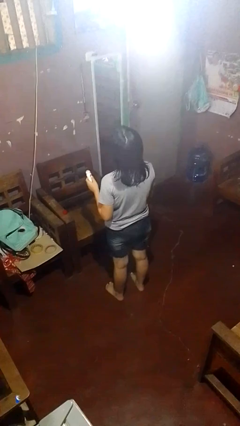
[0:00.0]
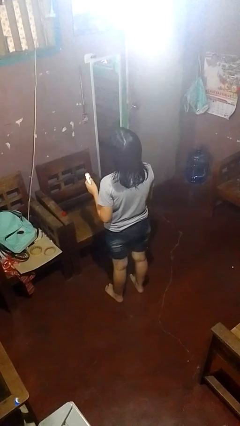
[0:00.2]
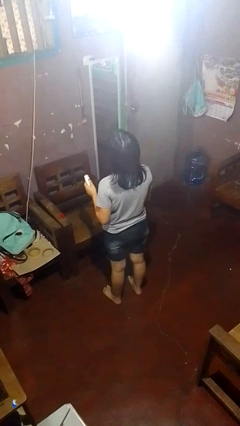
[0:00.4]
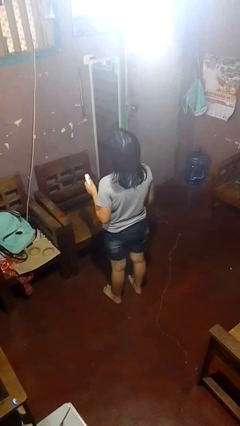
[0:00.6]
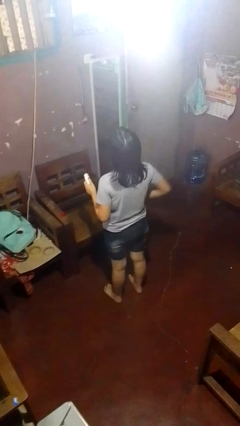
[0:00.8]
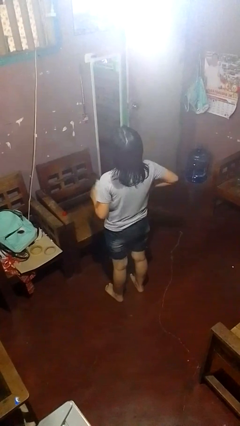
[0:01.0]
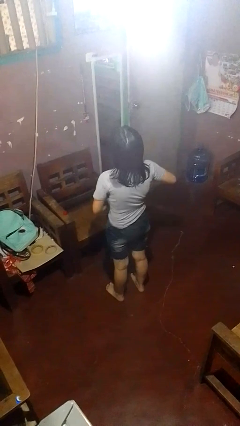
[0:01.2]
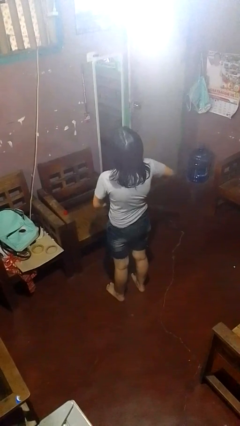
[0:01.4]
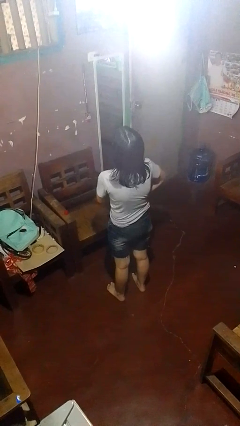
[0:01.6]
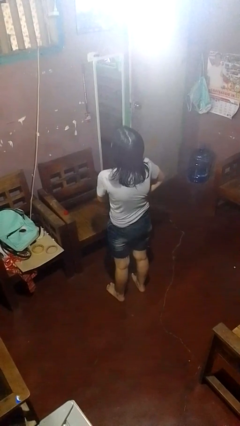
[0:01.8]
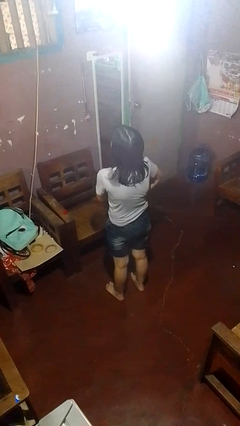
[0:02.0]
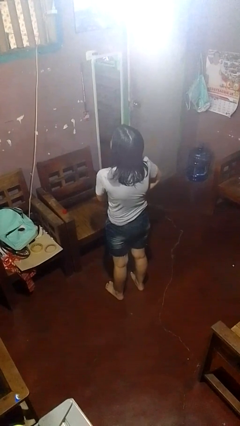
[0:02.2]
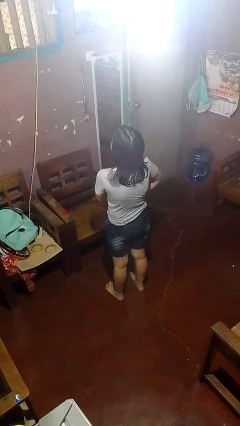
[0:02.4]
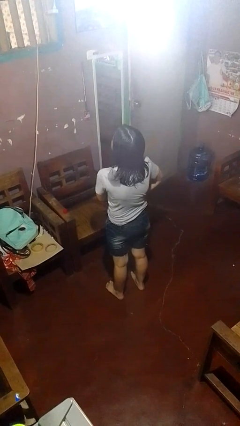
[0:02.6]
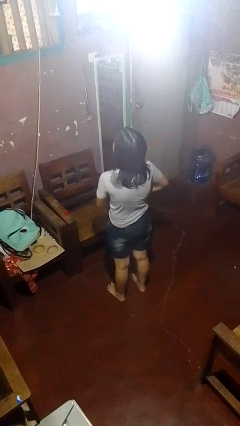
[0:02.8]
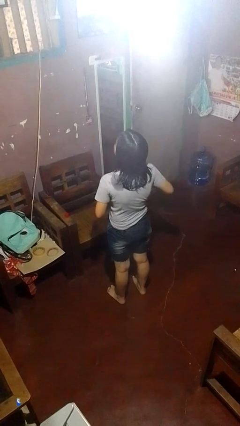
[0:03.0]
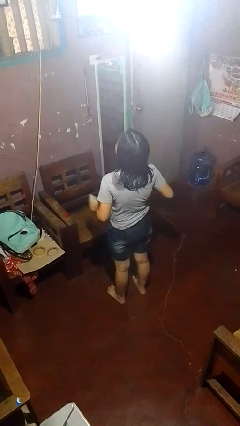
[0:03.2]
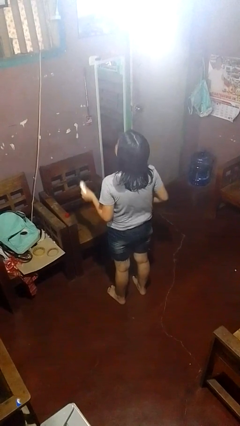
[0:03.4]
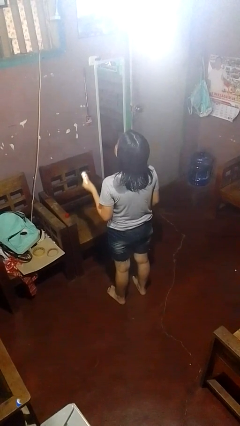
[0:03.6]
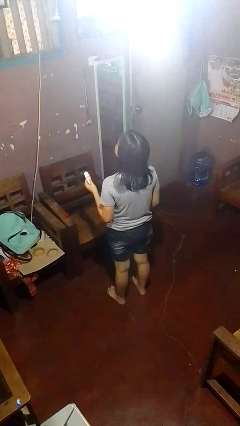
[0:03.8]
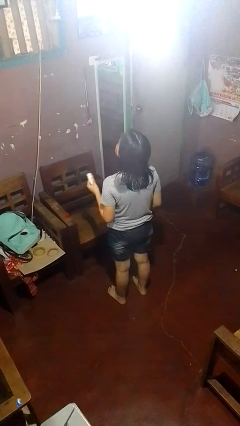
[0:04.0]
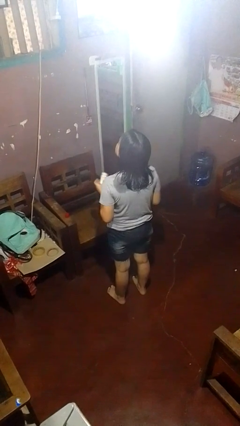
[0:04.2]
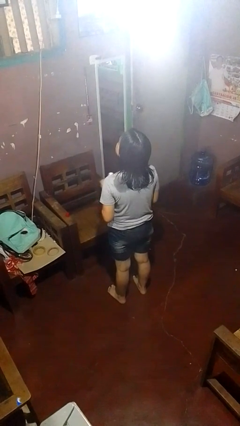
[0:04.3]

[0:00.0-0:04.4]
person applies deodorant

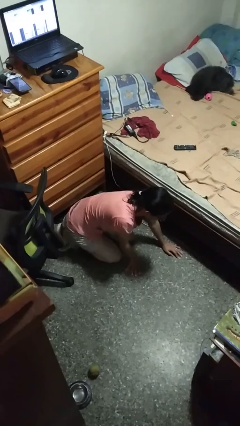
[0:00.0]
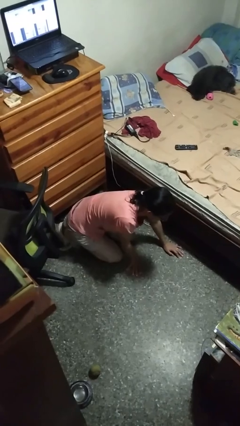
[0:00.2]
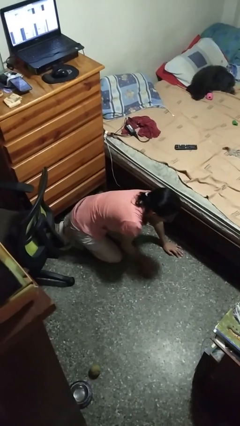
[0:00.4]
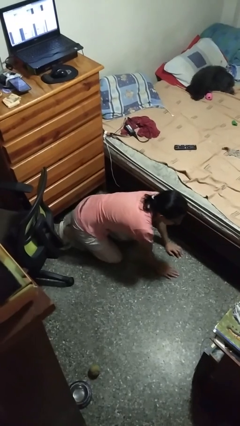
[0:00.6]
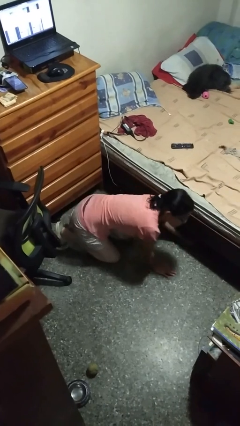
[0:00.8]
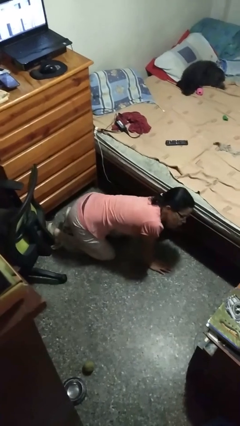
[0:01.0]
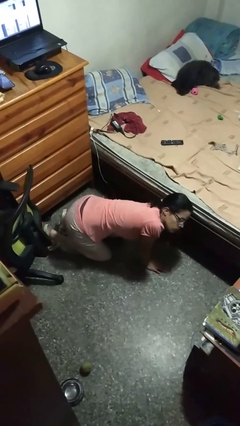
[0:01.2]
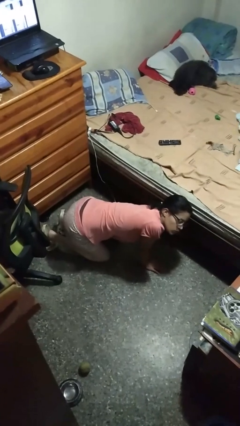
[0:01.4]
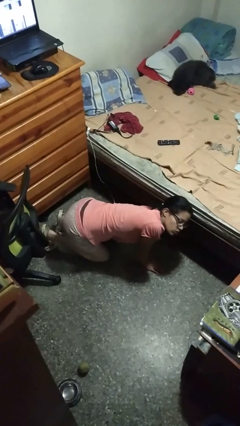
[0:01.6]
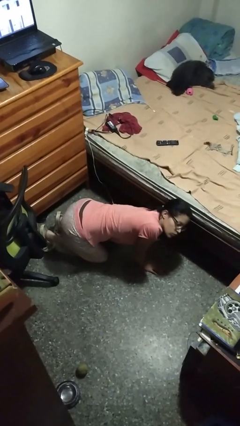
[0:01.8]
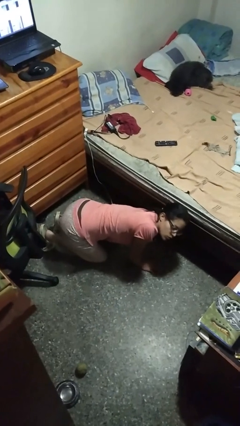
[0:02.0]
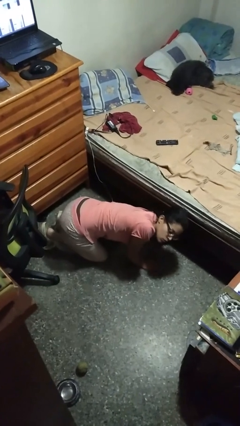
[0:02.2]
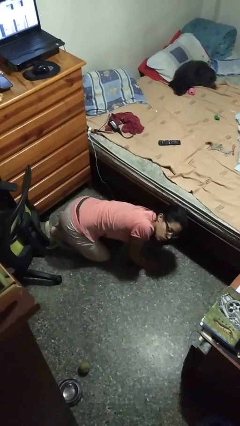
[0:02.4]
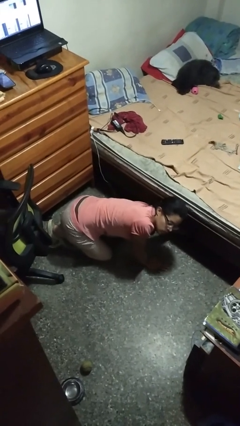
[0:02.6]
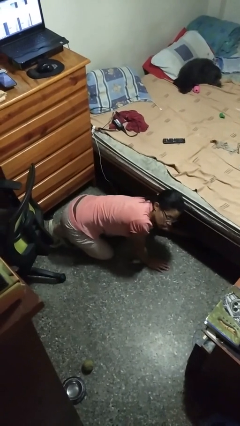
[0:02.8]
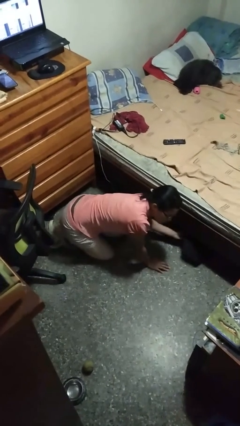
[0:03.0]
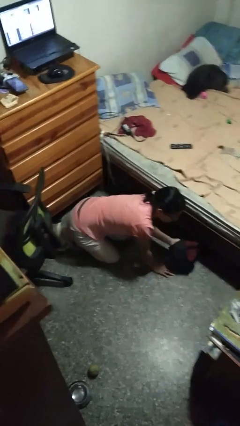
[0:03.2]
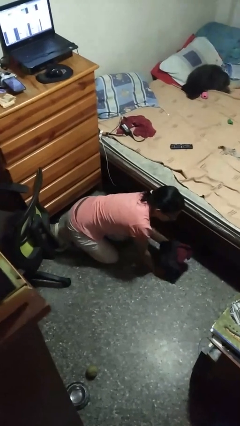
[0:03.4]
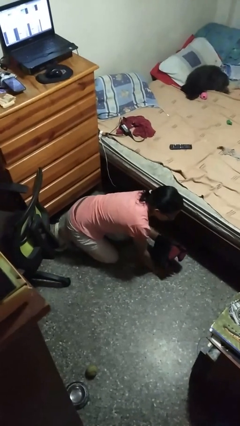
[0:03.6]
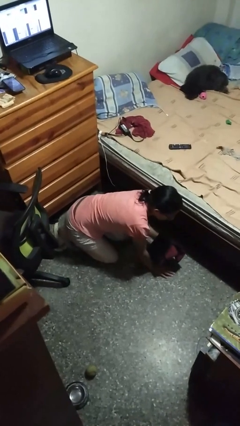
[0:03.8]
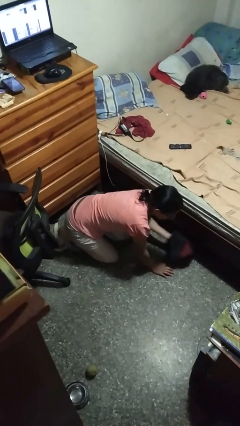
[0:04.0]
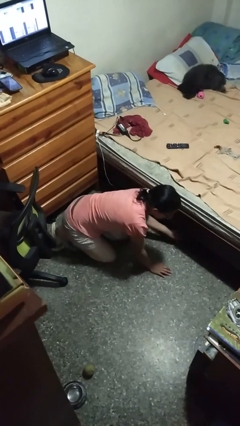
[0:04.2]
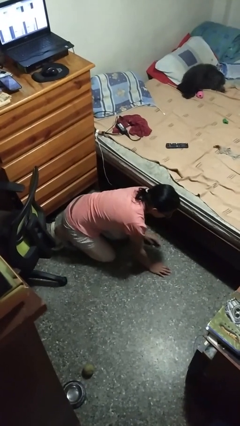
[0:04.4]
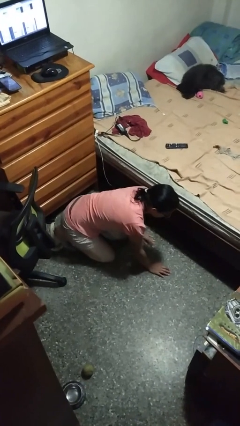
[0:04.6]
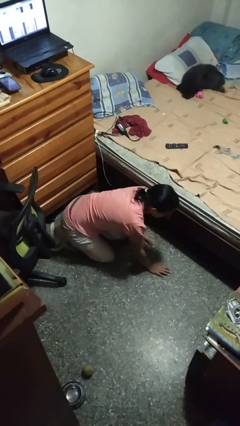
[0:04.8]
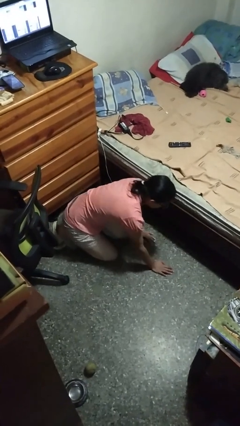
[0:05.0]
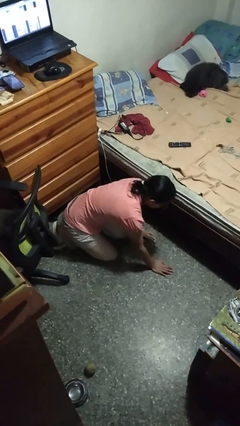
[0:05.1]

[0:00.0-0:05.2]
person searches under bed

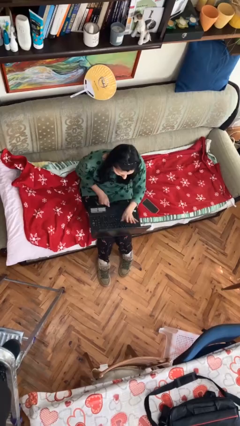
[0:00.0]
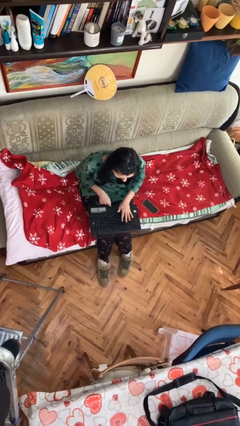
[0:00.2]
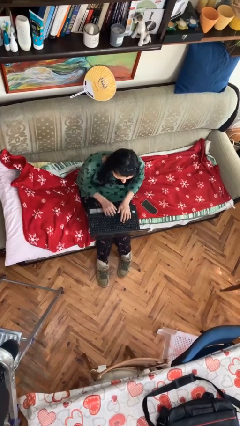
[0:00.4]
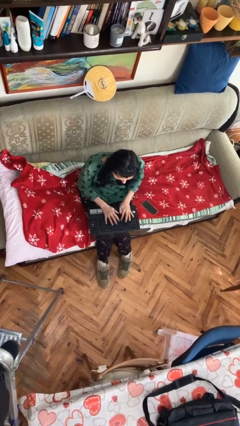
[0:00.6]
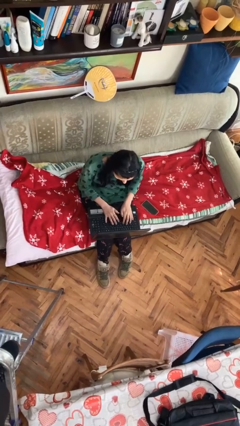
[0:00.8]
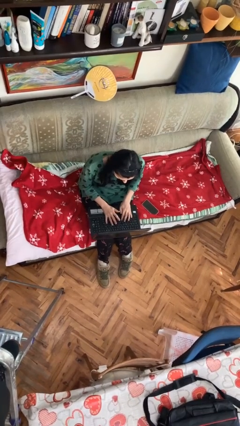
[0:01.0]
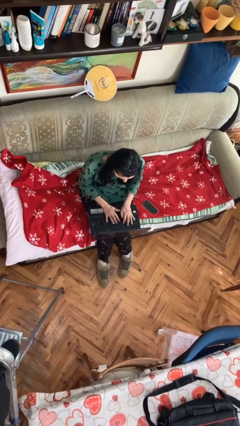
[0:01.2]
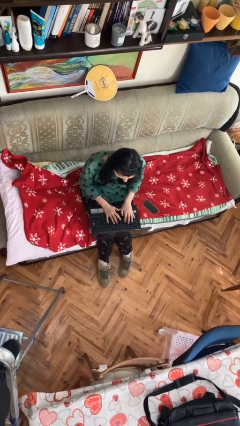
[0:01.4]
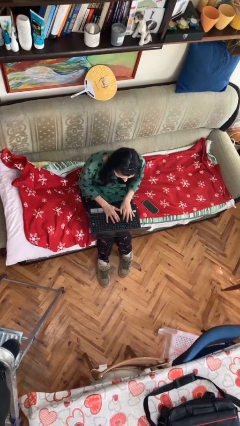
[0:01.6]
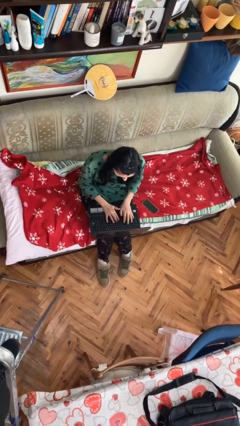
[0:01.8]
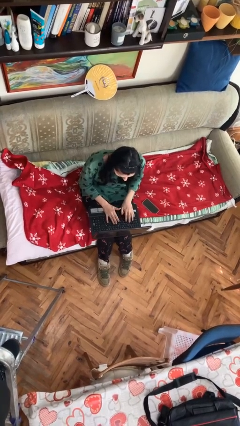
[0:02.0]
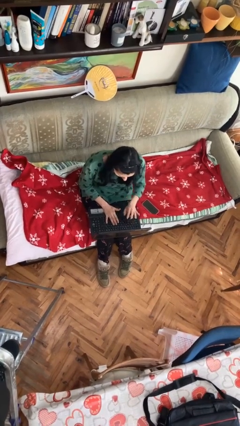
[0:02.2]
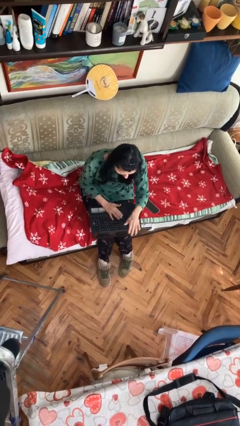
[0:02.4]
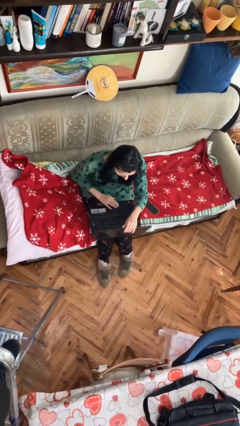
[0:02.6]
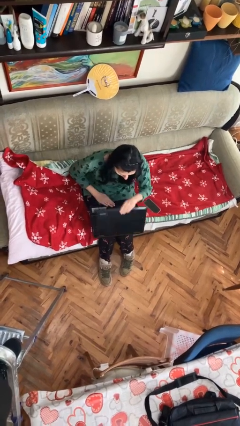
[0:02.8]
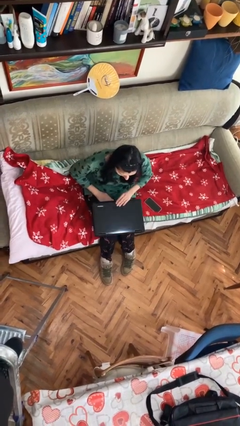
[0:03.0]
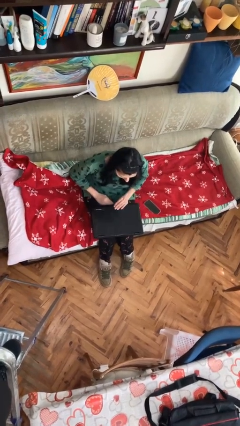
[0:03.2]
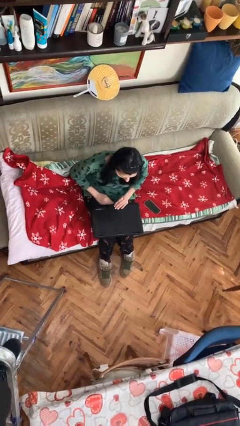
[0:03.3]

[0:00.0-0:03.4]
person interacts with laptop

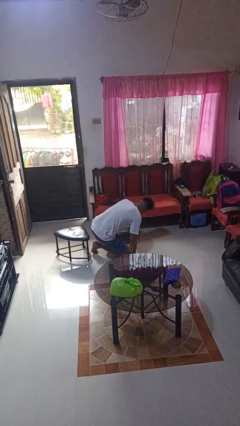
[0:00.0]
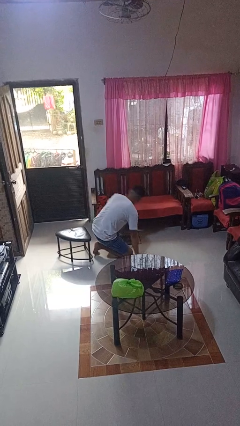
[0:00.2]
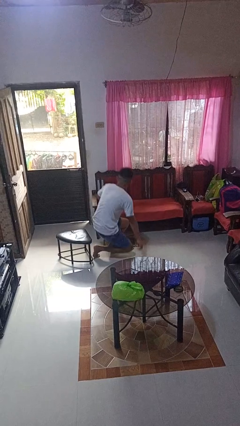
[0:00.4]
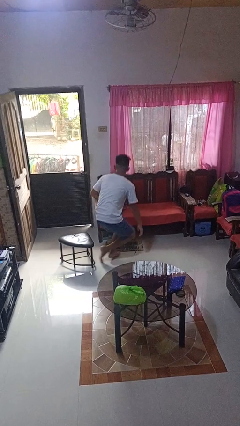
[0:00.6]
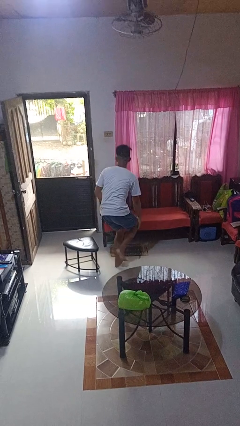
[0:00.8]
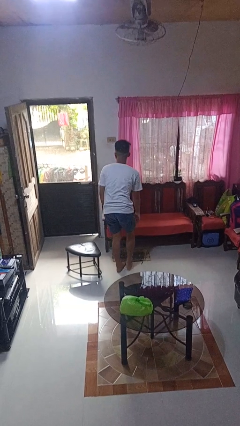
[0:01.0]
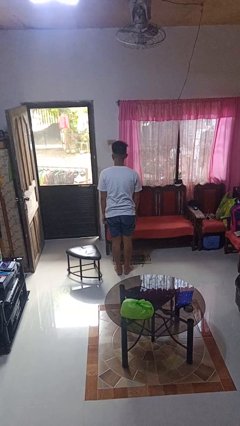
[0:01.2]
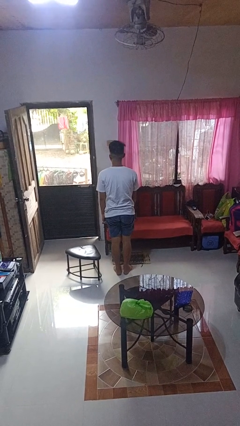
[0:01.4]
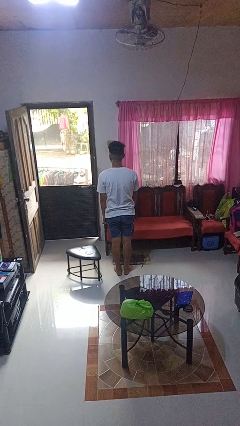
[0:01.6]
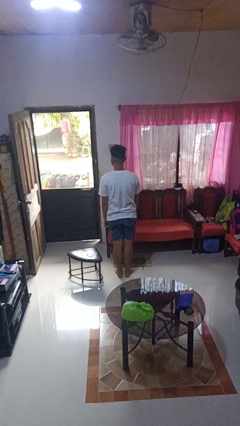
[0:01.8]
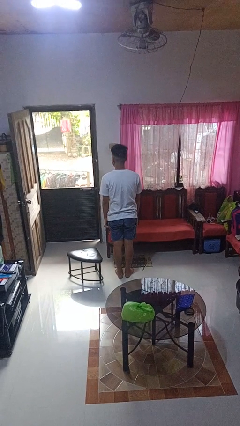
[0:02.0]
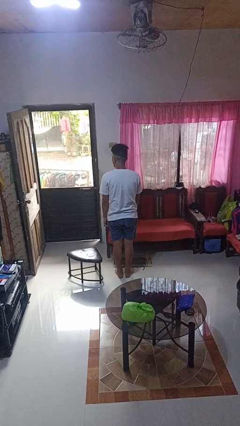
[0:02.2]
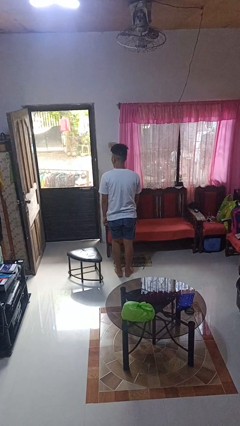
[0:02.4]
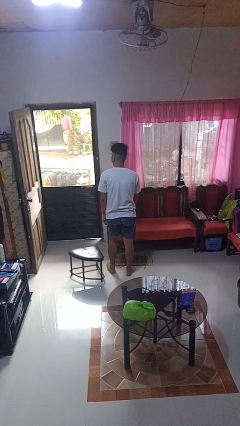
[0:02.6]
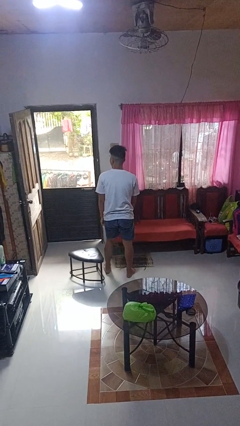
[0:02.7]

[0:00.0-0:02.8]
person stands up from floor

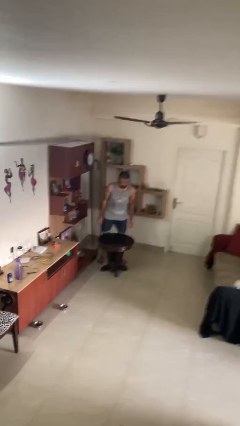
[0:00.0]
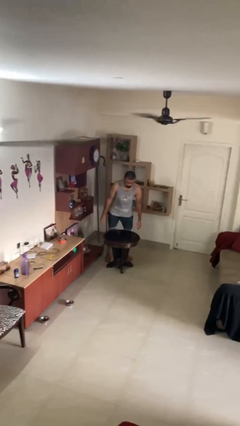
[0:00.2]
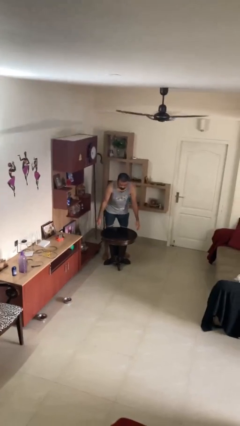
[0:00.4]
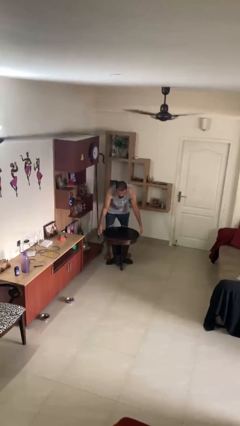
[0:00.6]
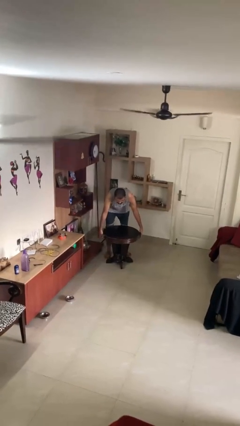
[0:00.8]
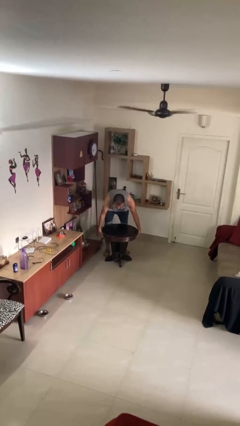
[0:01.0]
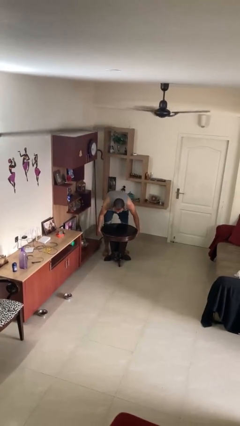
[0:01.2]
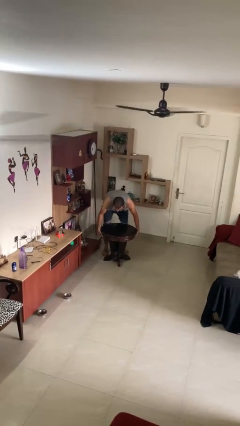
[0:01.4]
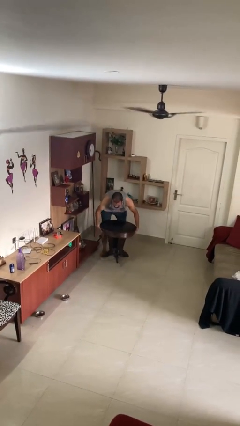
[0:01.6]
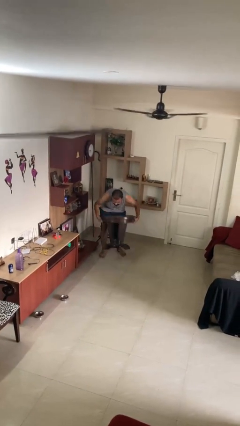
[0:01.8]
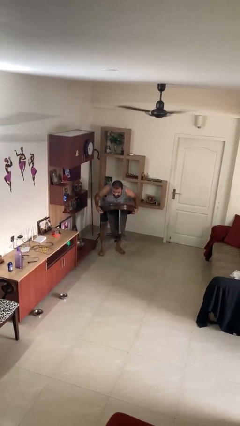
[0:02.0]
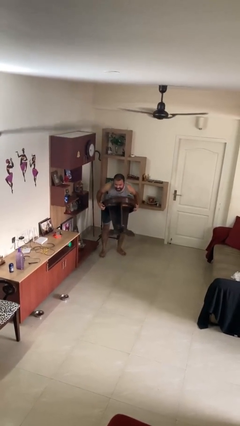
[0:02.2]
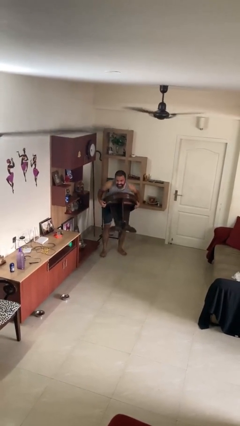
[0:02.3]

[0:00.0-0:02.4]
person picks up object from floor
